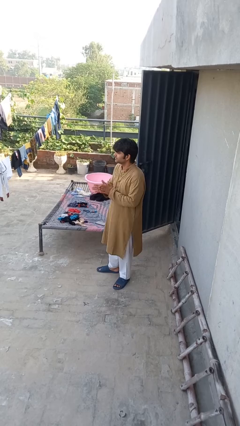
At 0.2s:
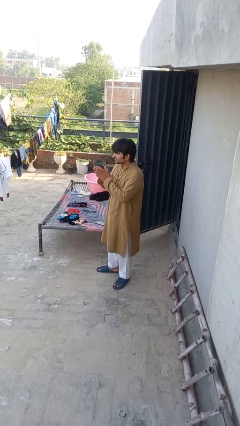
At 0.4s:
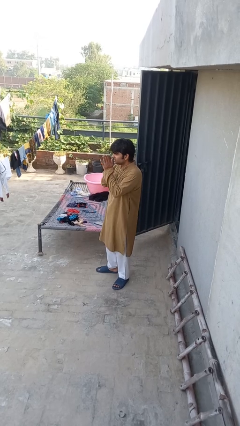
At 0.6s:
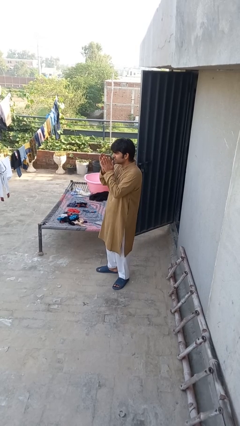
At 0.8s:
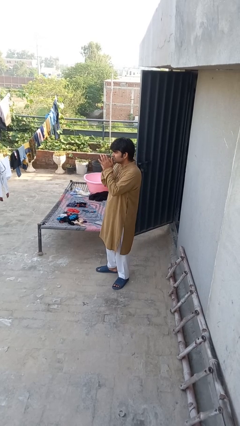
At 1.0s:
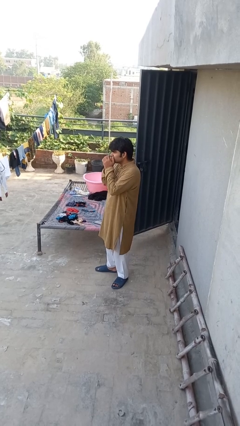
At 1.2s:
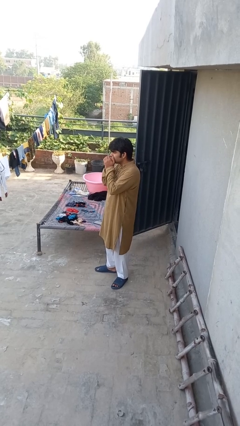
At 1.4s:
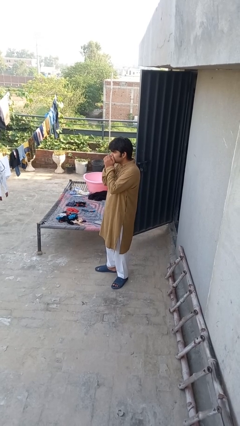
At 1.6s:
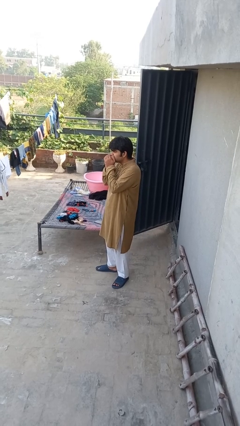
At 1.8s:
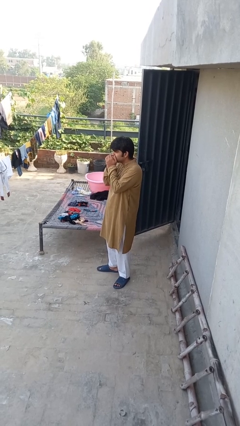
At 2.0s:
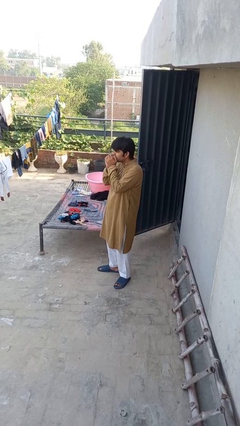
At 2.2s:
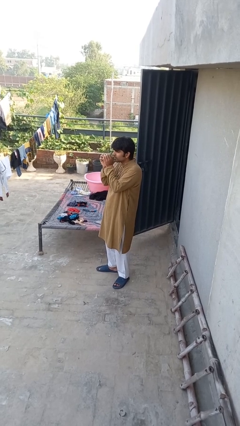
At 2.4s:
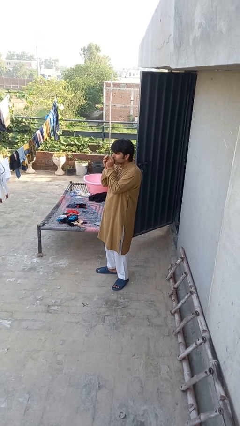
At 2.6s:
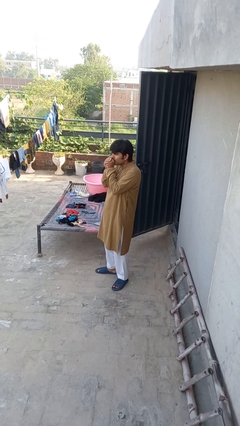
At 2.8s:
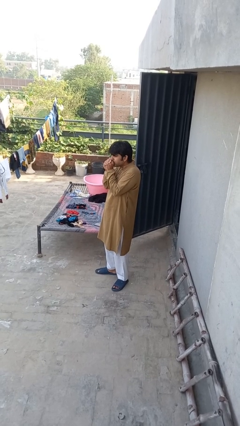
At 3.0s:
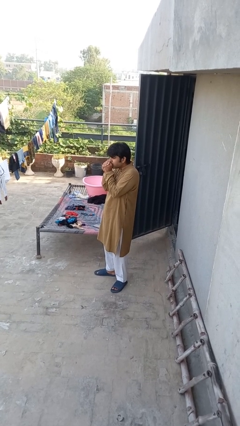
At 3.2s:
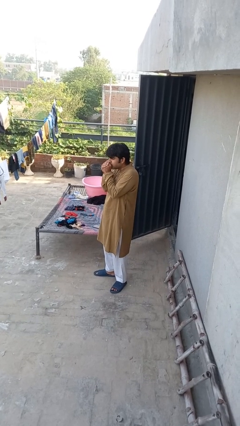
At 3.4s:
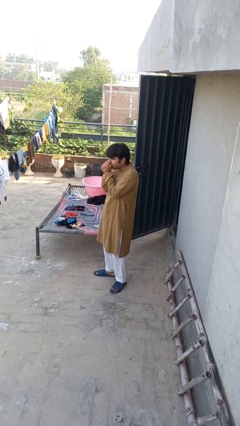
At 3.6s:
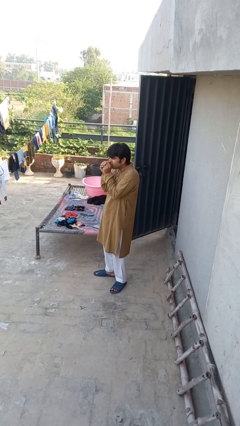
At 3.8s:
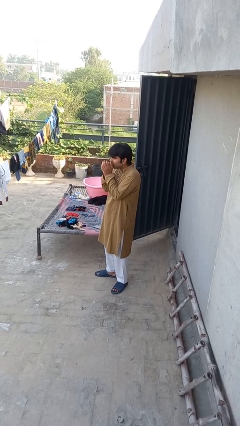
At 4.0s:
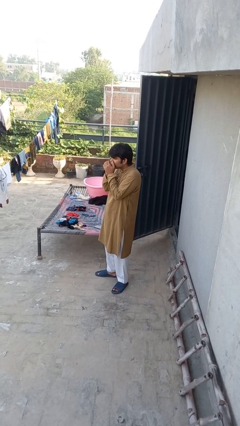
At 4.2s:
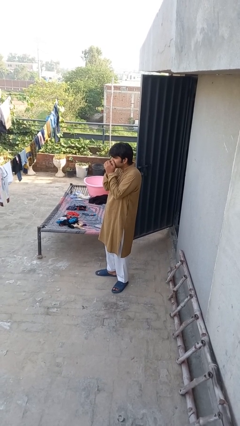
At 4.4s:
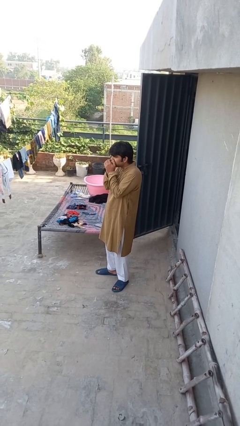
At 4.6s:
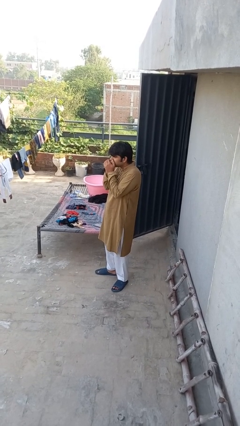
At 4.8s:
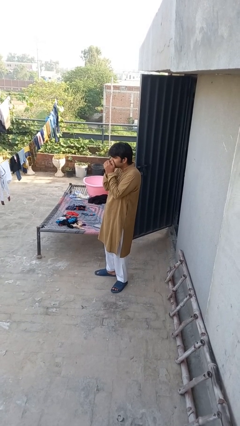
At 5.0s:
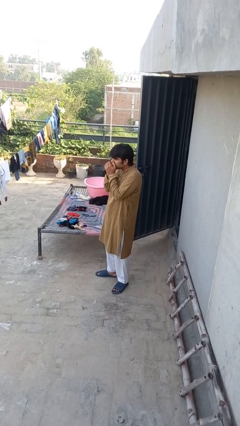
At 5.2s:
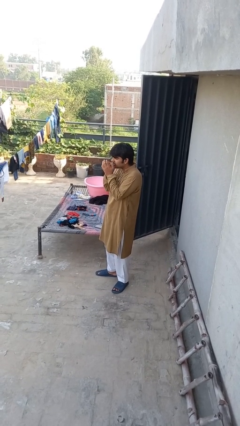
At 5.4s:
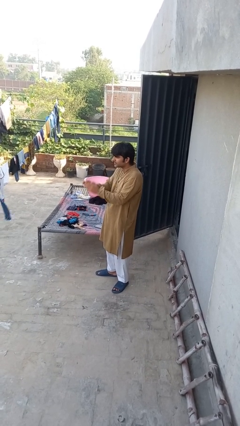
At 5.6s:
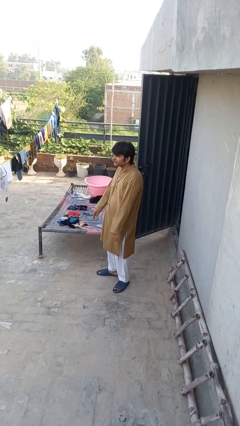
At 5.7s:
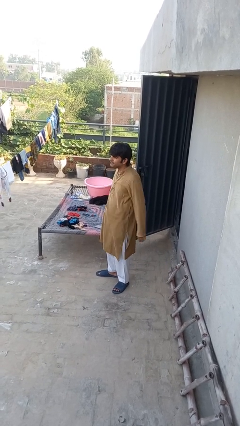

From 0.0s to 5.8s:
person blows into hands

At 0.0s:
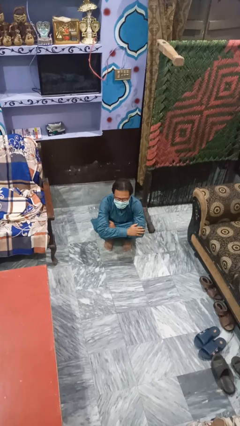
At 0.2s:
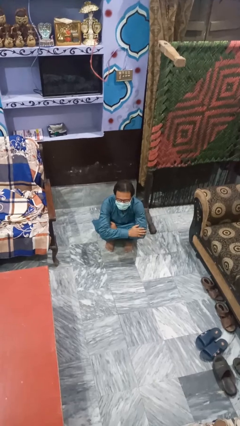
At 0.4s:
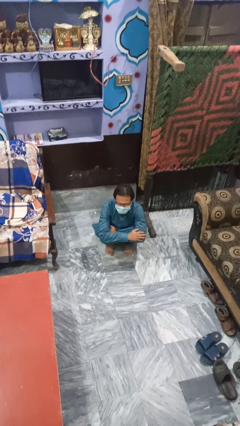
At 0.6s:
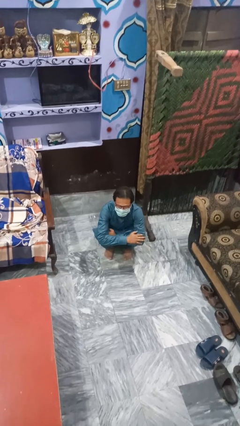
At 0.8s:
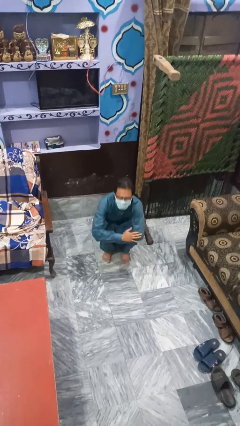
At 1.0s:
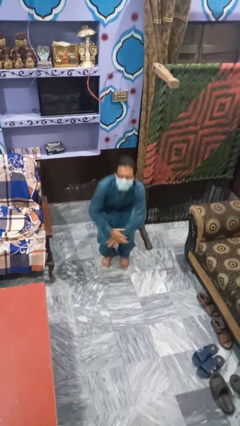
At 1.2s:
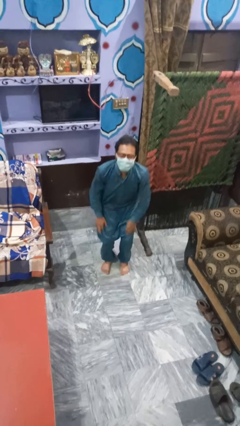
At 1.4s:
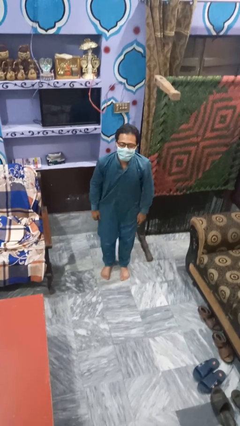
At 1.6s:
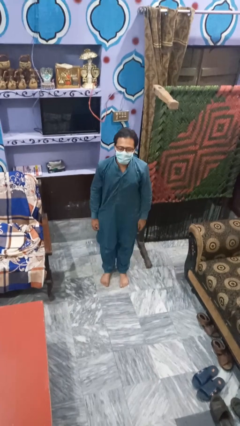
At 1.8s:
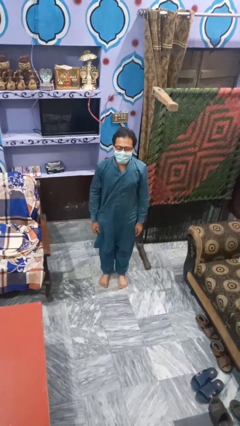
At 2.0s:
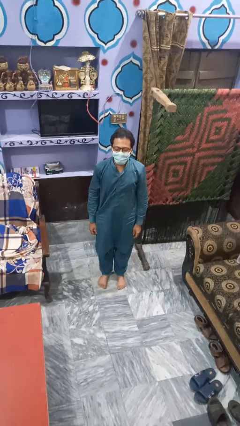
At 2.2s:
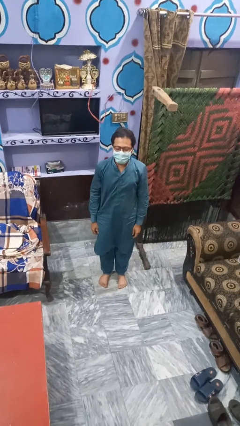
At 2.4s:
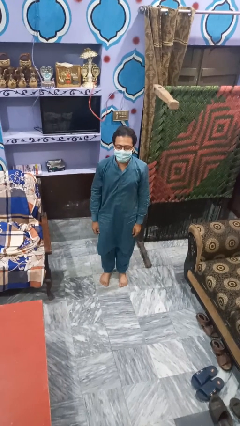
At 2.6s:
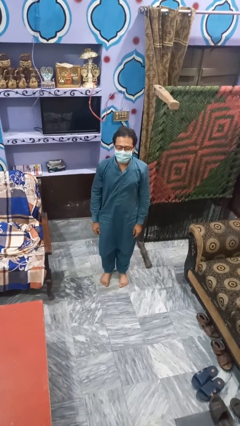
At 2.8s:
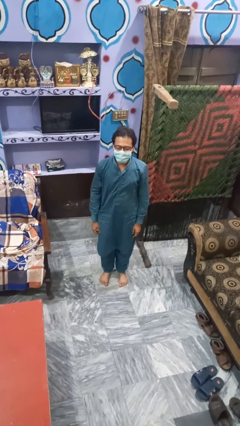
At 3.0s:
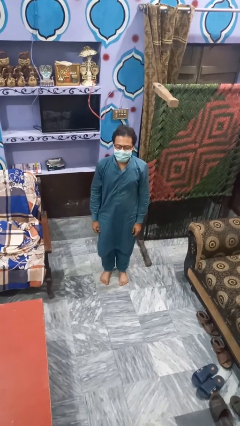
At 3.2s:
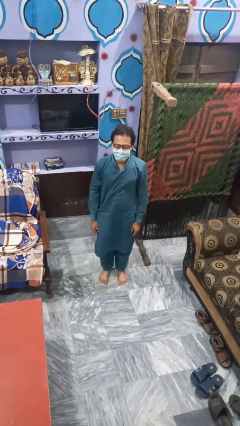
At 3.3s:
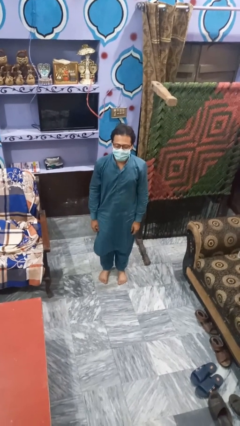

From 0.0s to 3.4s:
person stands up

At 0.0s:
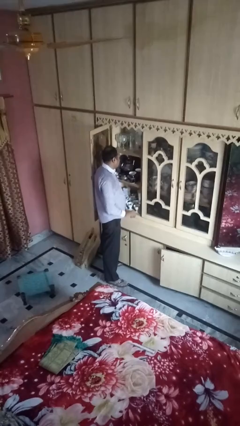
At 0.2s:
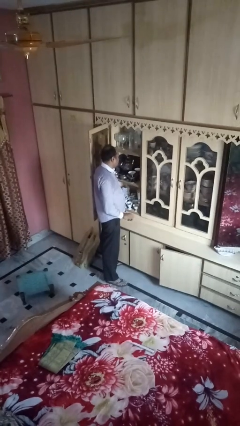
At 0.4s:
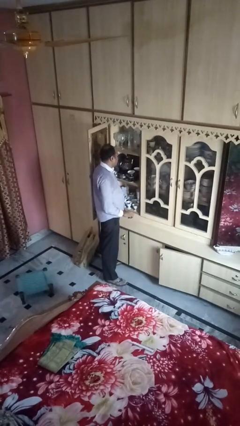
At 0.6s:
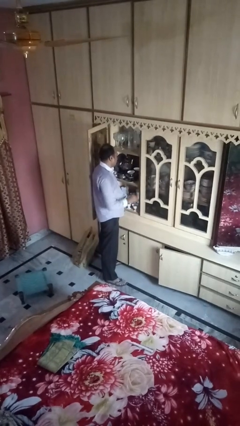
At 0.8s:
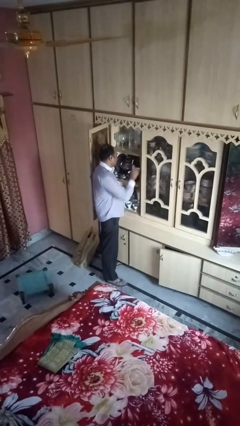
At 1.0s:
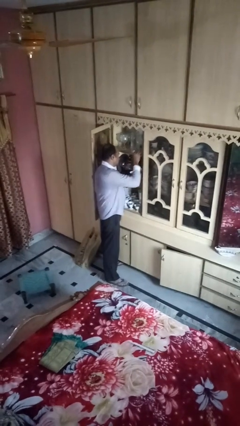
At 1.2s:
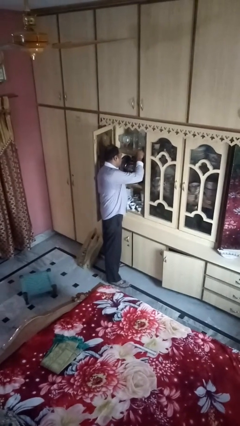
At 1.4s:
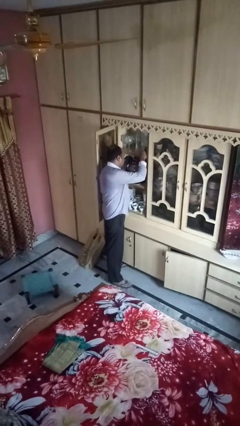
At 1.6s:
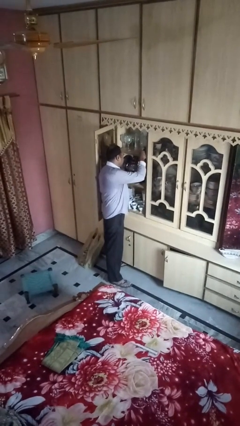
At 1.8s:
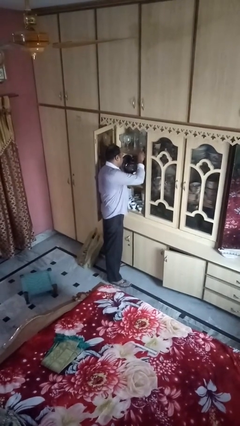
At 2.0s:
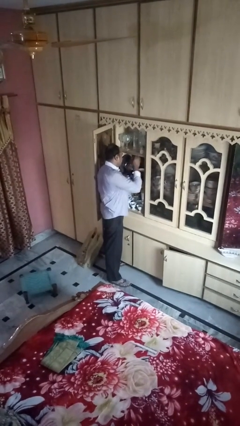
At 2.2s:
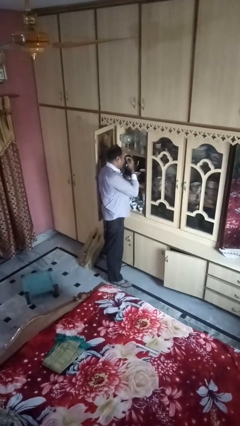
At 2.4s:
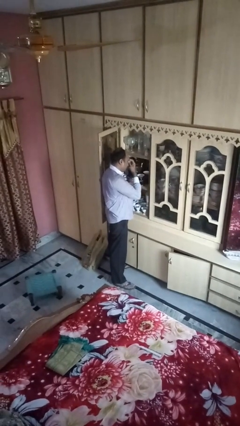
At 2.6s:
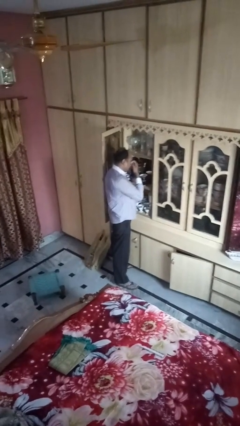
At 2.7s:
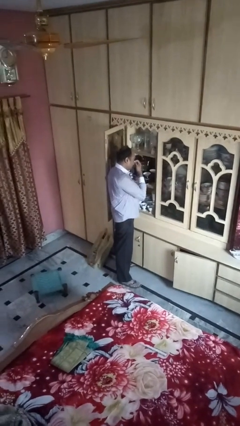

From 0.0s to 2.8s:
person puts down object on shelf

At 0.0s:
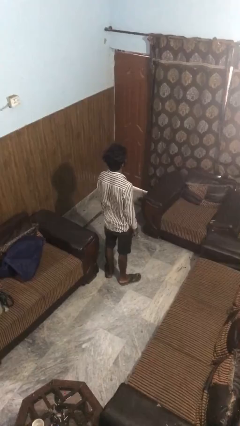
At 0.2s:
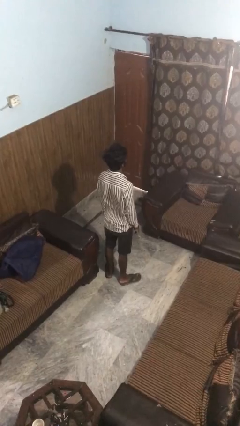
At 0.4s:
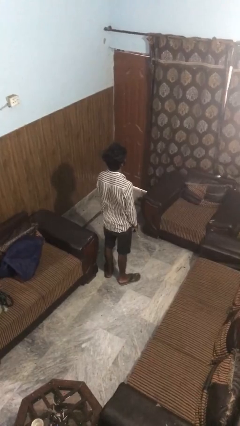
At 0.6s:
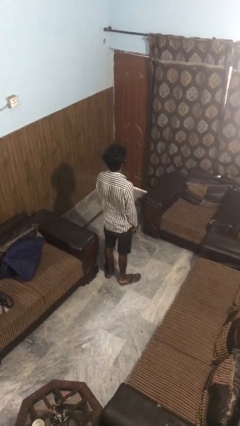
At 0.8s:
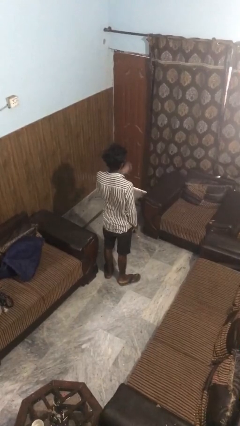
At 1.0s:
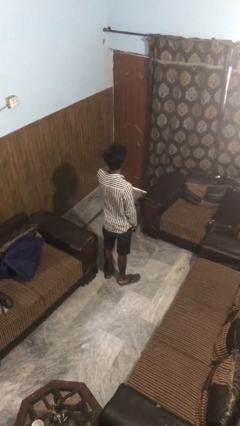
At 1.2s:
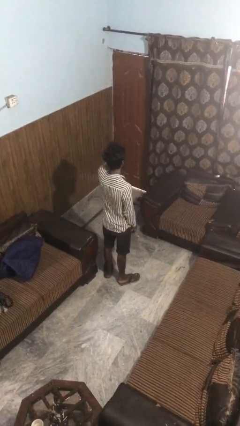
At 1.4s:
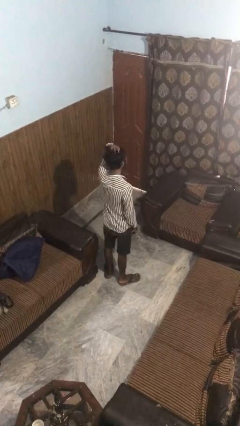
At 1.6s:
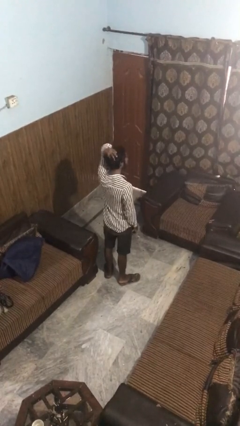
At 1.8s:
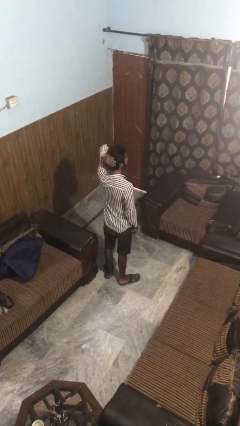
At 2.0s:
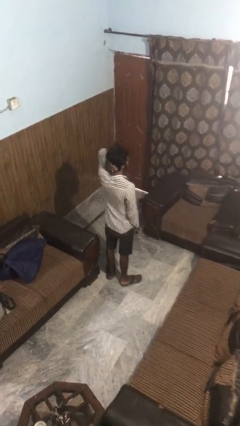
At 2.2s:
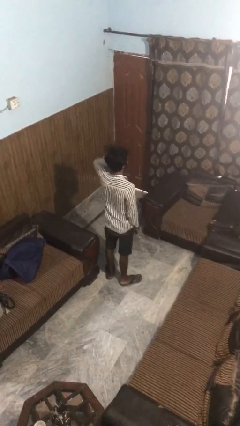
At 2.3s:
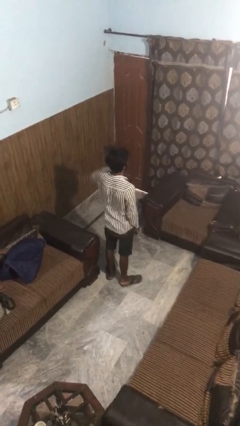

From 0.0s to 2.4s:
person strokes hair

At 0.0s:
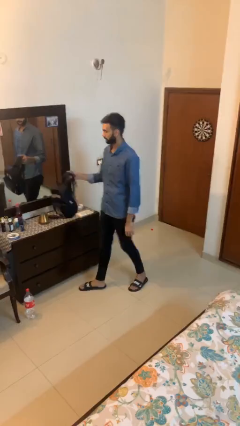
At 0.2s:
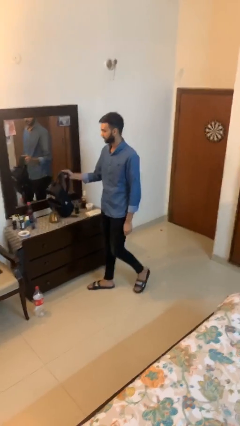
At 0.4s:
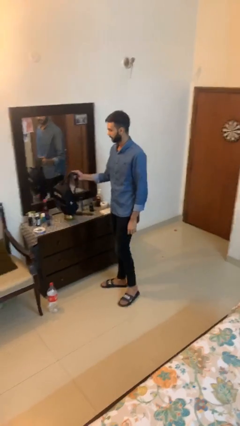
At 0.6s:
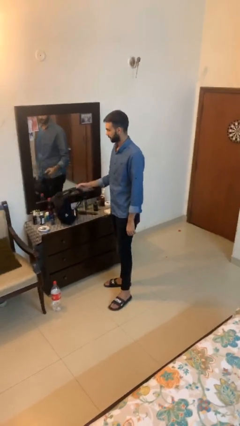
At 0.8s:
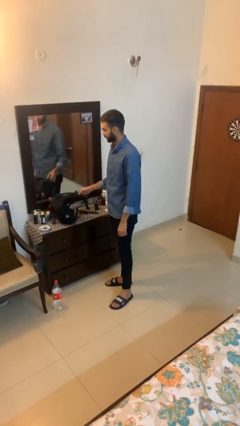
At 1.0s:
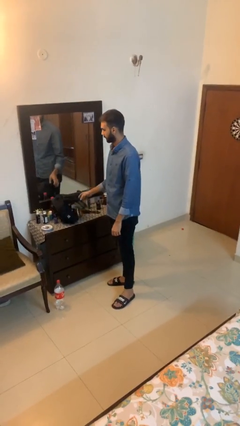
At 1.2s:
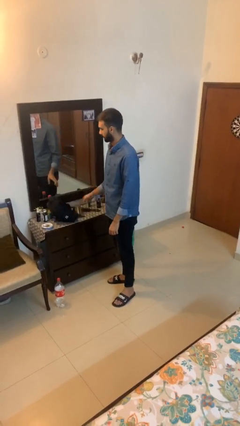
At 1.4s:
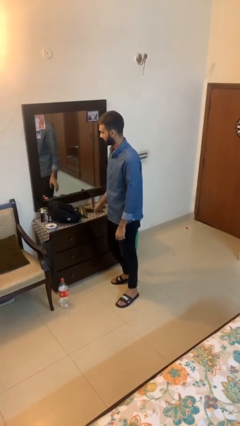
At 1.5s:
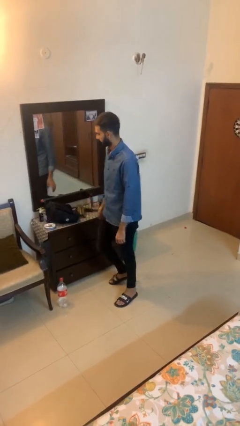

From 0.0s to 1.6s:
person puts down object on table

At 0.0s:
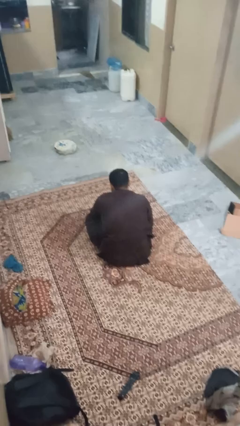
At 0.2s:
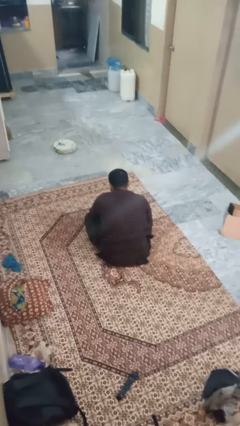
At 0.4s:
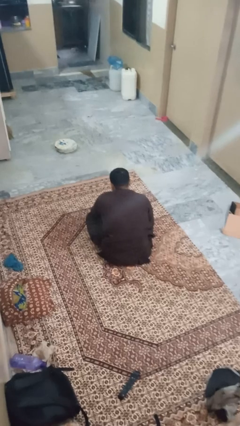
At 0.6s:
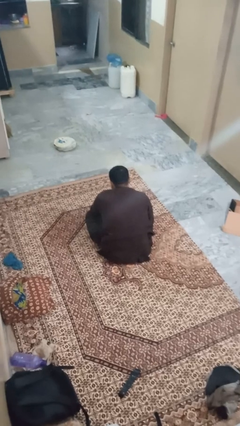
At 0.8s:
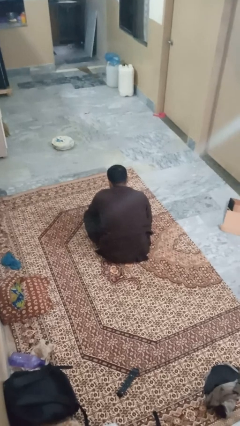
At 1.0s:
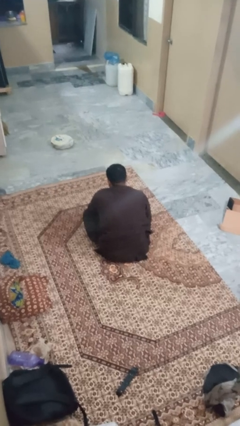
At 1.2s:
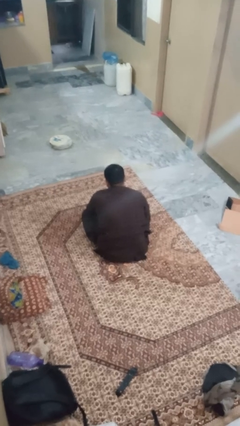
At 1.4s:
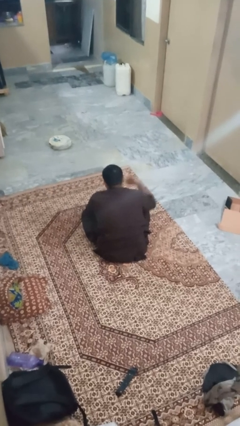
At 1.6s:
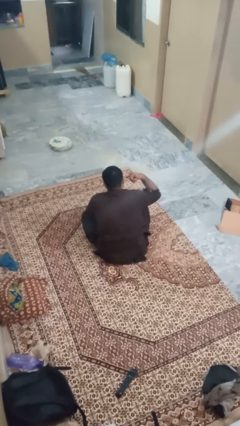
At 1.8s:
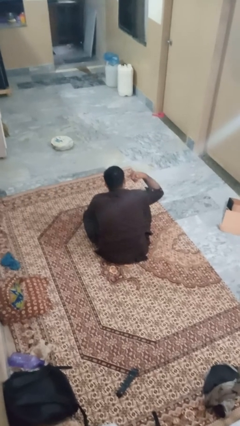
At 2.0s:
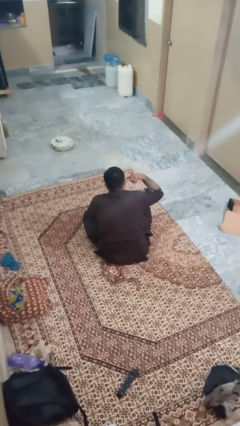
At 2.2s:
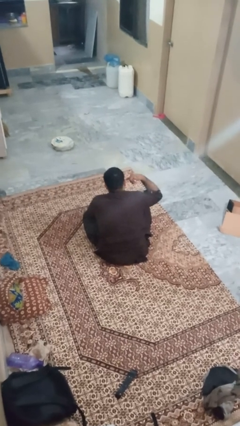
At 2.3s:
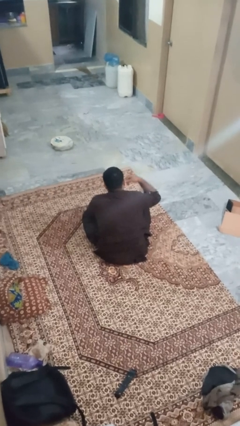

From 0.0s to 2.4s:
person gestures call me
